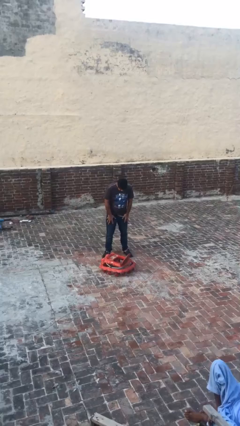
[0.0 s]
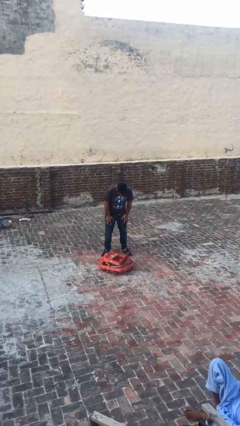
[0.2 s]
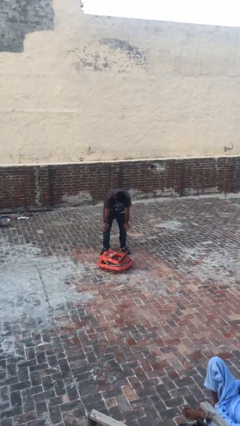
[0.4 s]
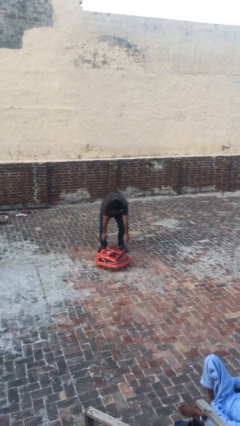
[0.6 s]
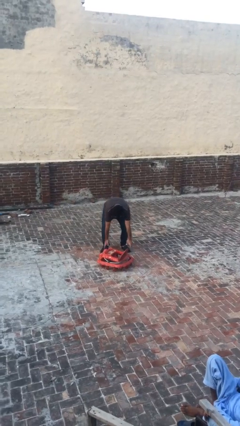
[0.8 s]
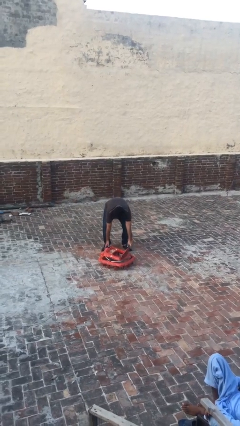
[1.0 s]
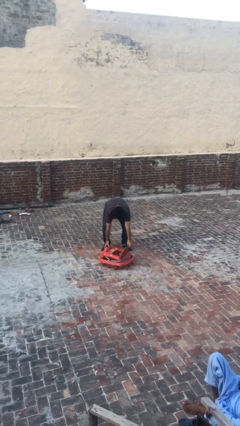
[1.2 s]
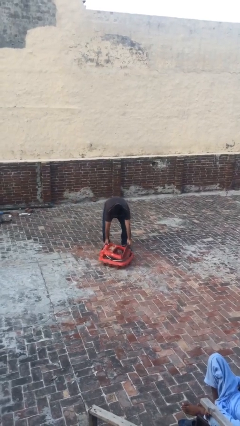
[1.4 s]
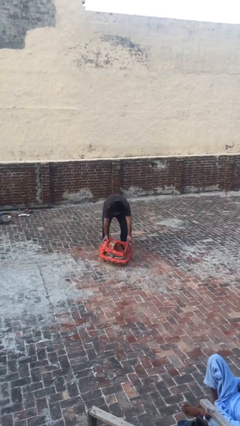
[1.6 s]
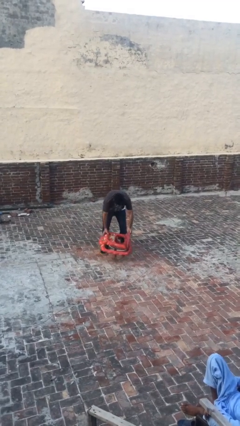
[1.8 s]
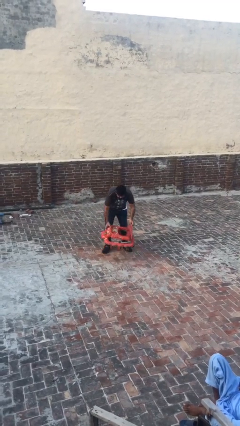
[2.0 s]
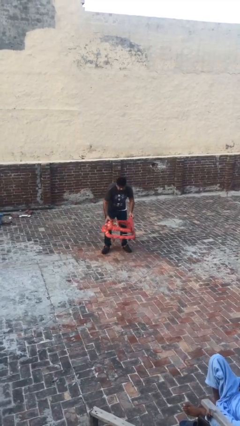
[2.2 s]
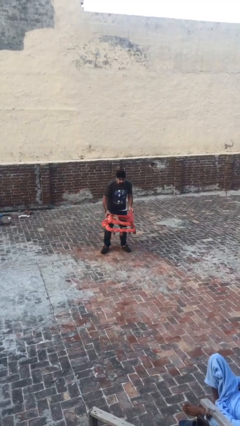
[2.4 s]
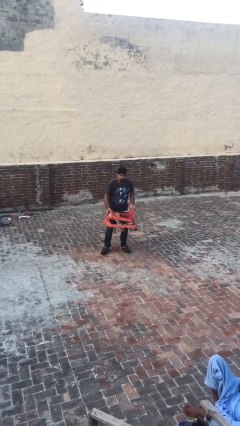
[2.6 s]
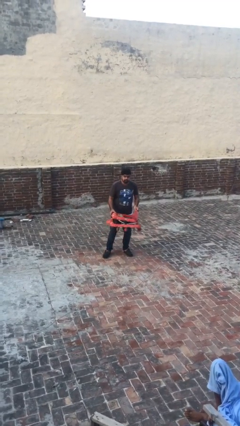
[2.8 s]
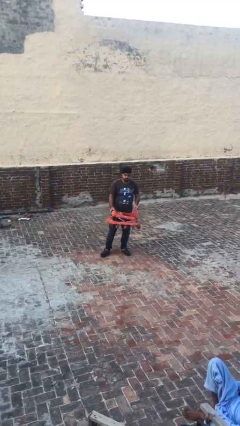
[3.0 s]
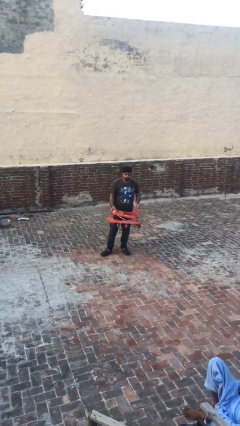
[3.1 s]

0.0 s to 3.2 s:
person picks up object from floor

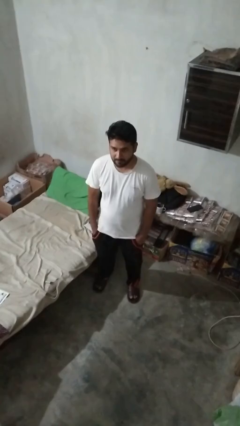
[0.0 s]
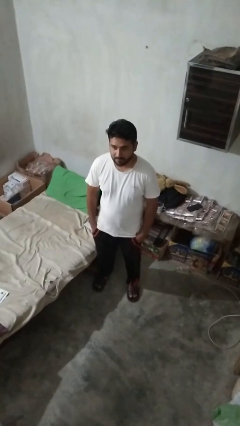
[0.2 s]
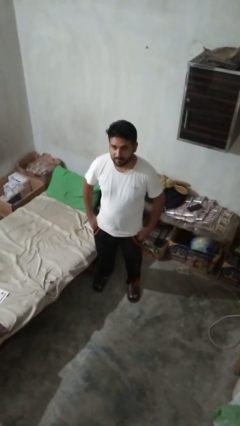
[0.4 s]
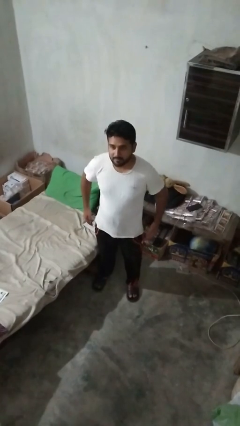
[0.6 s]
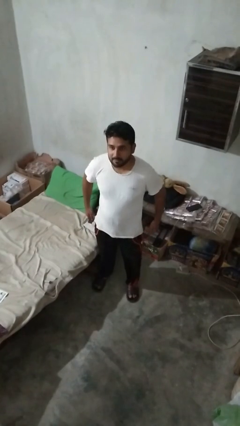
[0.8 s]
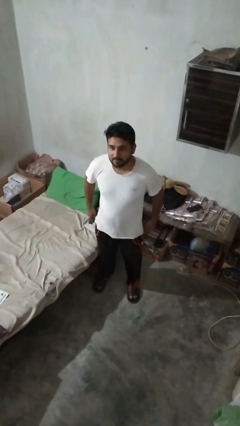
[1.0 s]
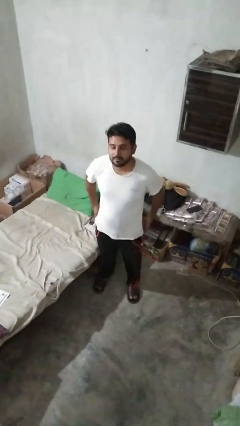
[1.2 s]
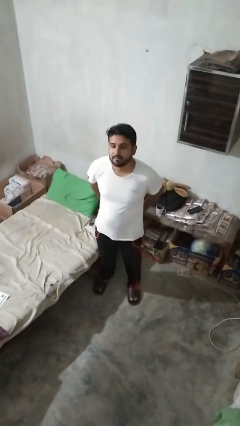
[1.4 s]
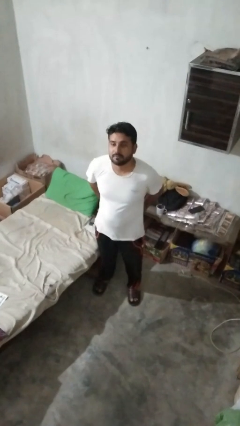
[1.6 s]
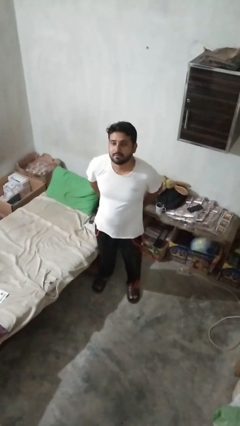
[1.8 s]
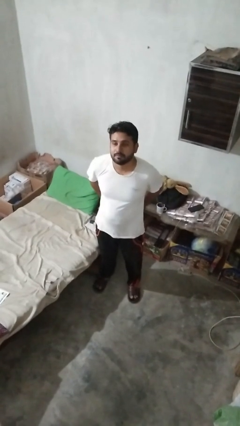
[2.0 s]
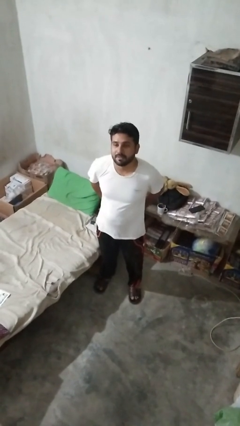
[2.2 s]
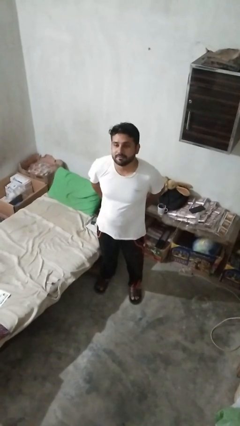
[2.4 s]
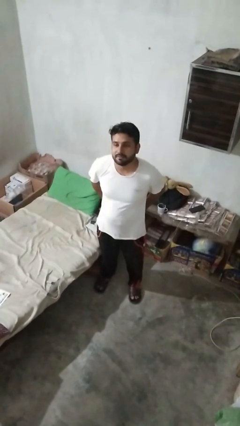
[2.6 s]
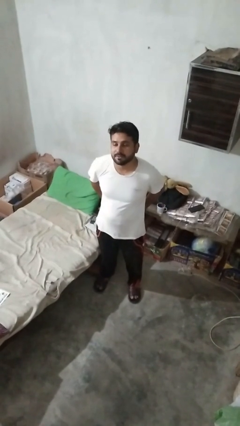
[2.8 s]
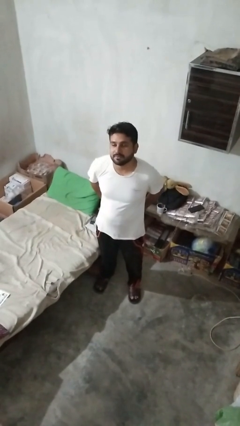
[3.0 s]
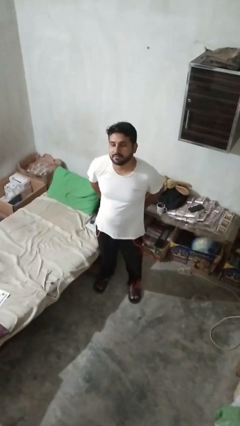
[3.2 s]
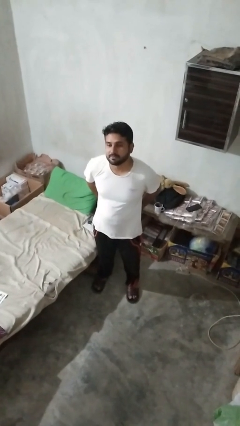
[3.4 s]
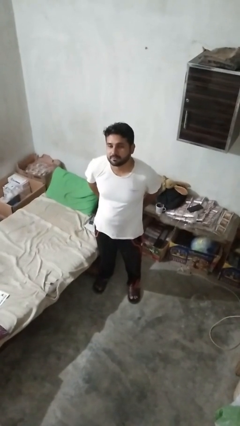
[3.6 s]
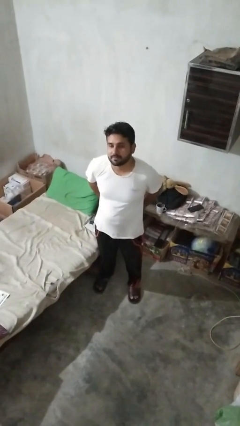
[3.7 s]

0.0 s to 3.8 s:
person puts hands in back pockets

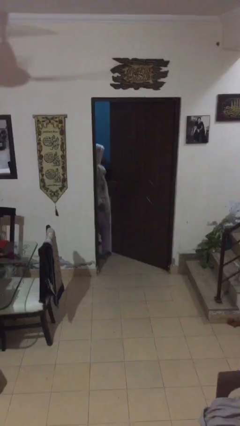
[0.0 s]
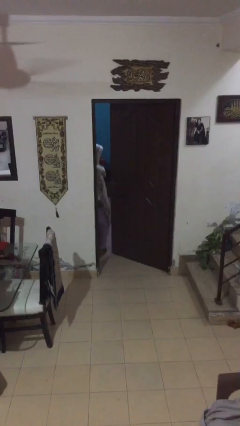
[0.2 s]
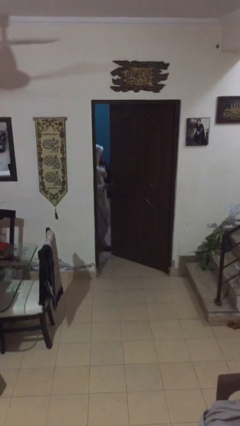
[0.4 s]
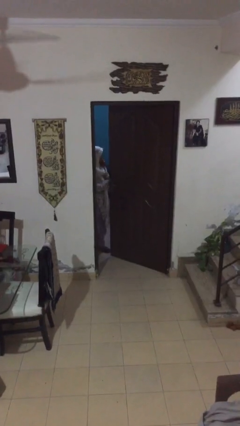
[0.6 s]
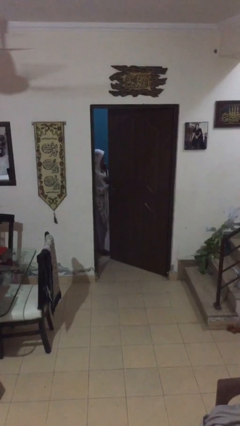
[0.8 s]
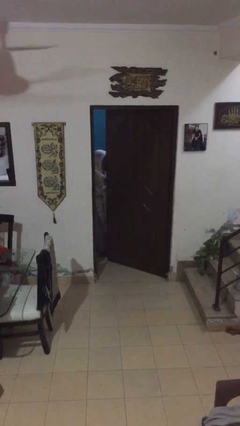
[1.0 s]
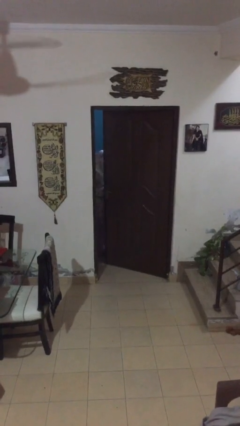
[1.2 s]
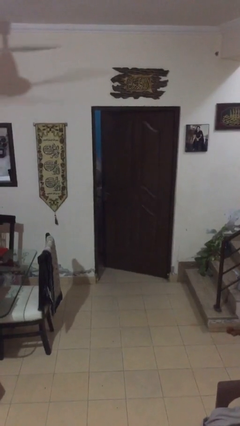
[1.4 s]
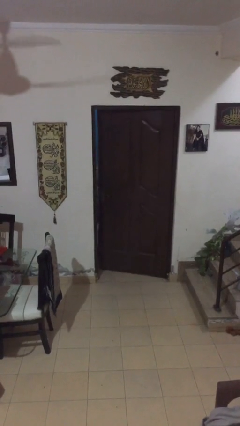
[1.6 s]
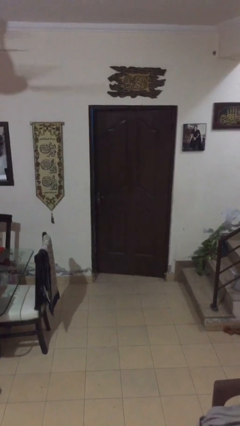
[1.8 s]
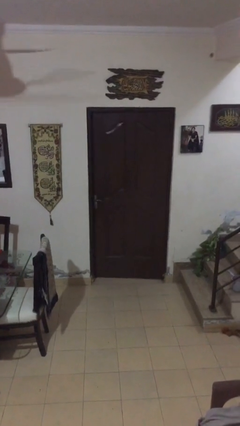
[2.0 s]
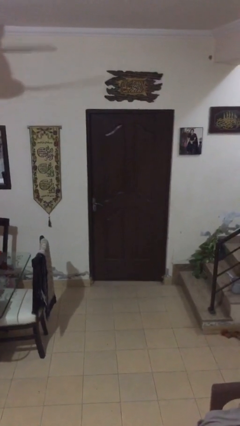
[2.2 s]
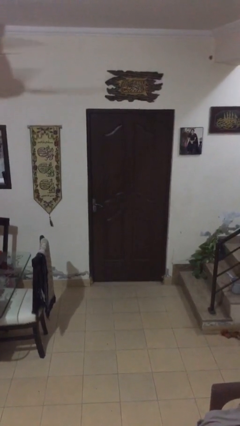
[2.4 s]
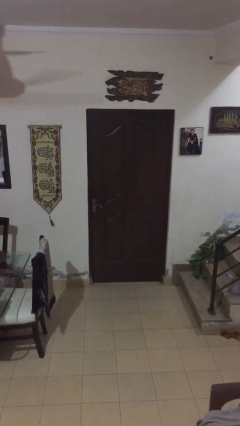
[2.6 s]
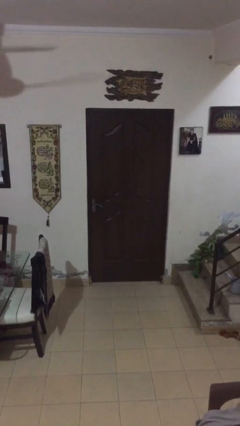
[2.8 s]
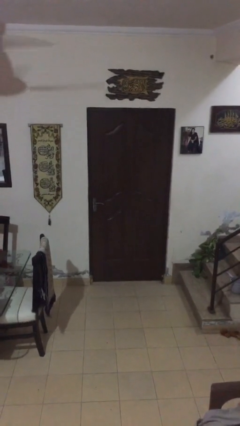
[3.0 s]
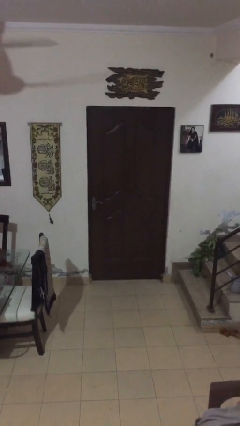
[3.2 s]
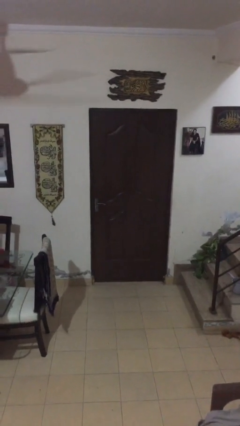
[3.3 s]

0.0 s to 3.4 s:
person closes facility door

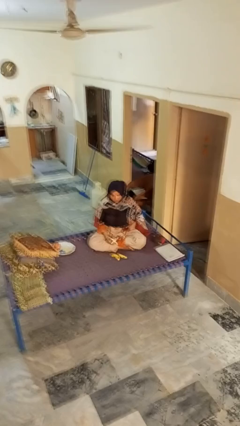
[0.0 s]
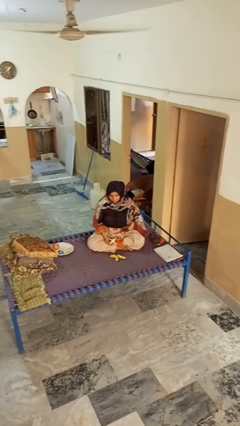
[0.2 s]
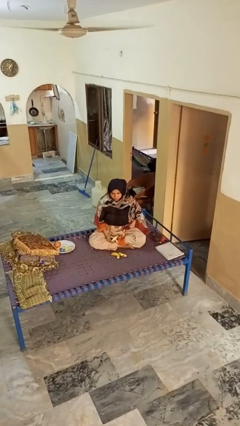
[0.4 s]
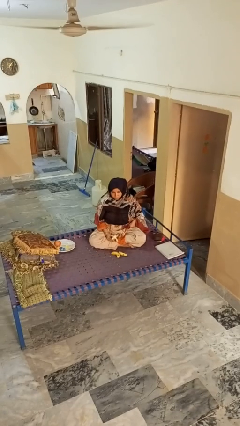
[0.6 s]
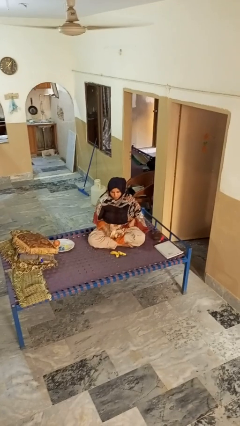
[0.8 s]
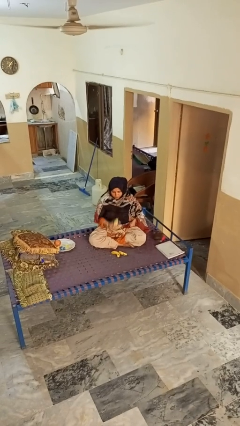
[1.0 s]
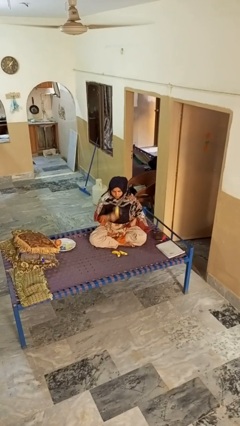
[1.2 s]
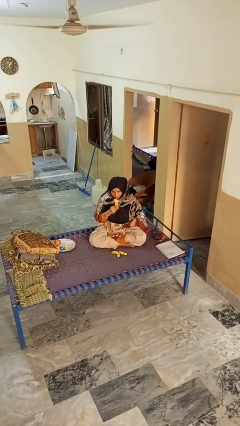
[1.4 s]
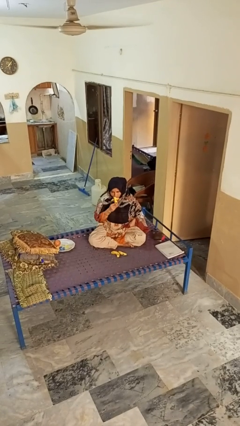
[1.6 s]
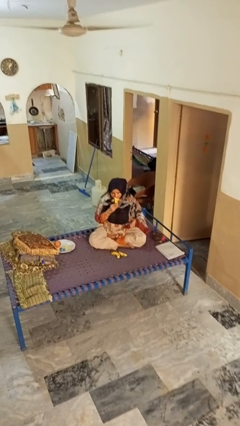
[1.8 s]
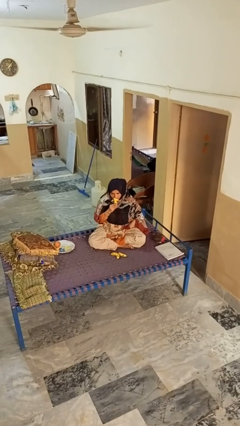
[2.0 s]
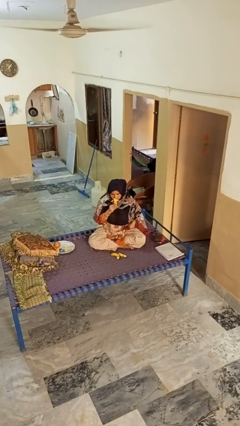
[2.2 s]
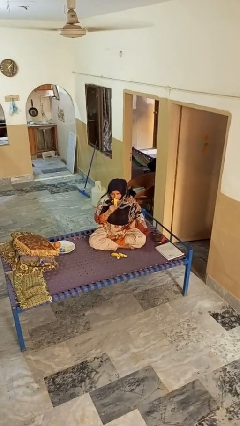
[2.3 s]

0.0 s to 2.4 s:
person eats banana

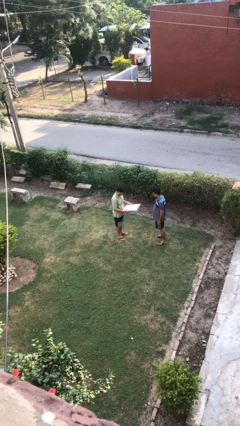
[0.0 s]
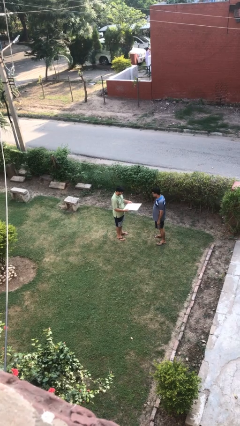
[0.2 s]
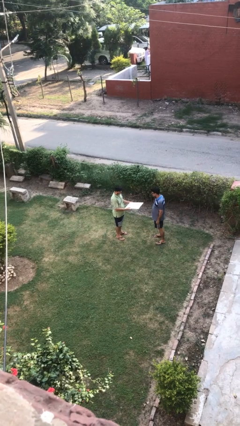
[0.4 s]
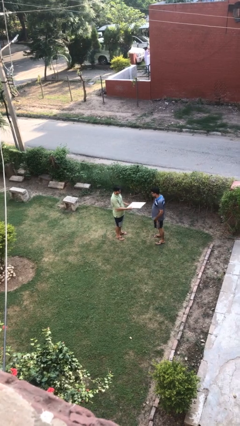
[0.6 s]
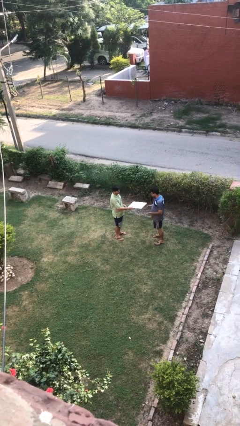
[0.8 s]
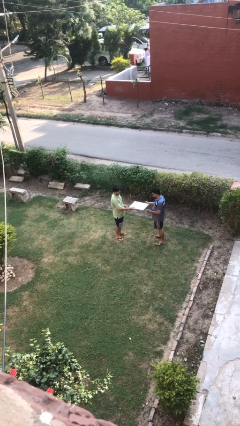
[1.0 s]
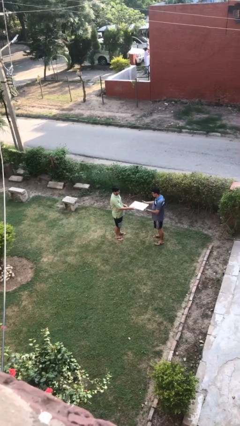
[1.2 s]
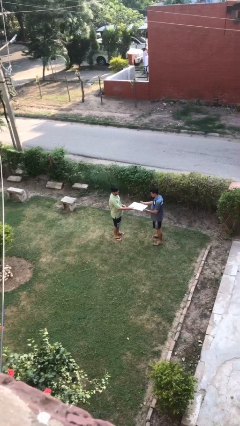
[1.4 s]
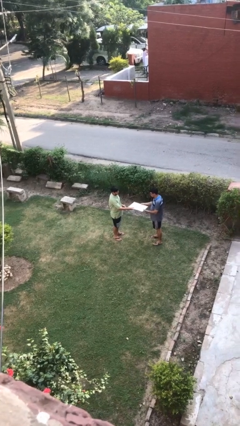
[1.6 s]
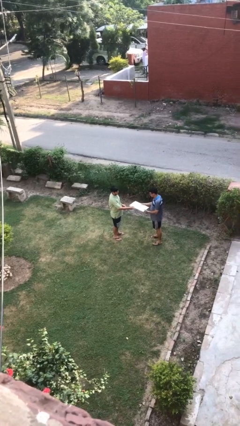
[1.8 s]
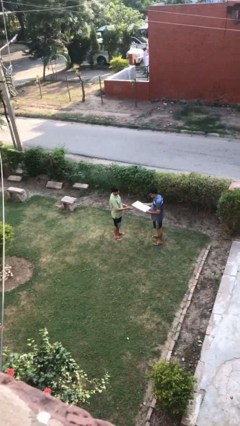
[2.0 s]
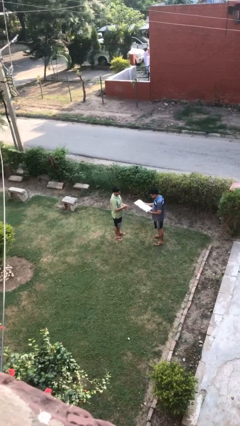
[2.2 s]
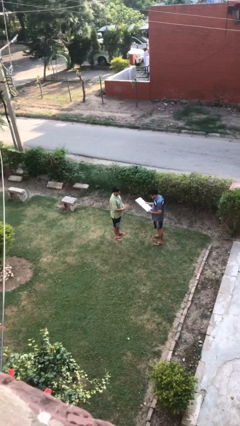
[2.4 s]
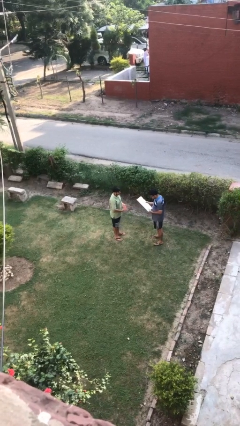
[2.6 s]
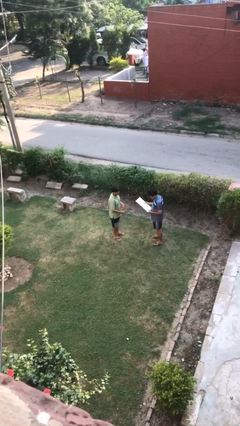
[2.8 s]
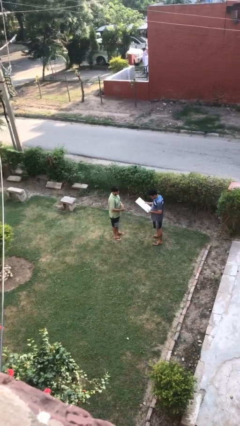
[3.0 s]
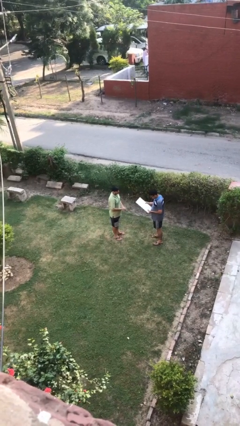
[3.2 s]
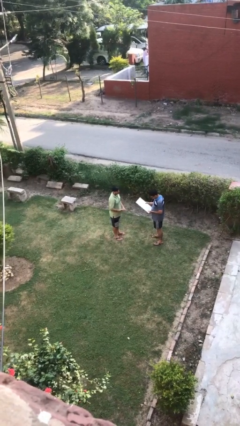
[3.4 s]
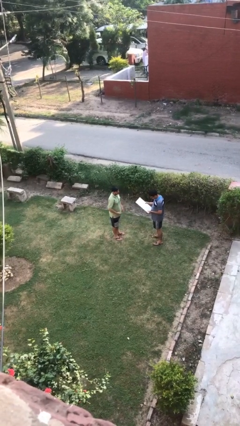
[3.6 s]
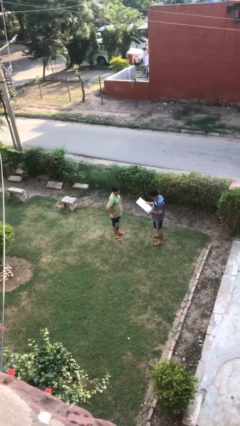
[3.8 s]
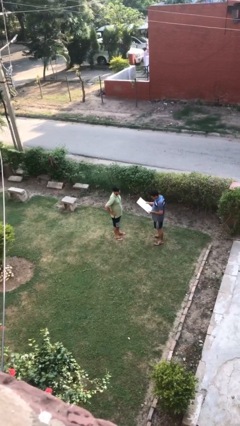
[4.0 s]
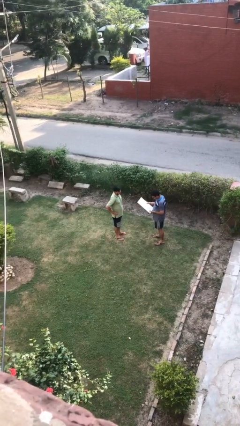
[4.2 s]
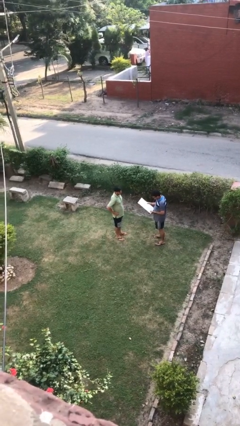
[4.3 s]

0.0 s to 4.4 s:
person transfers object to person

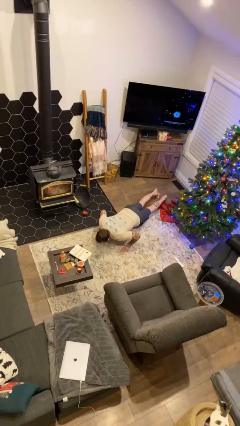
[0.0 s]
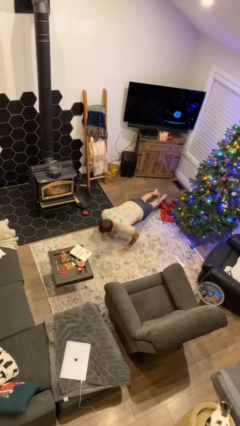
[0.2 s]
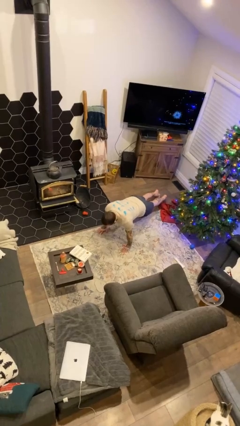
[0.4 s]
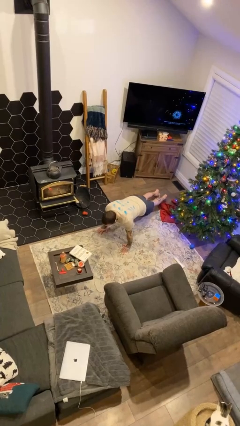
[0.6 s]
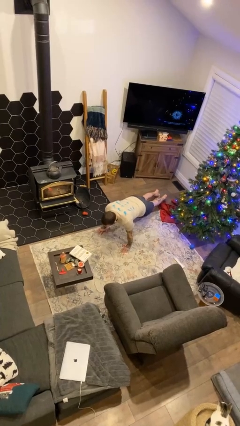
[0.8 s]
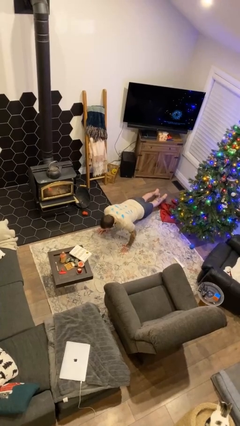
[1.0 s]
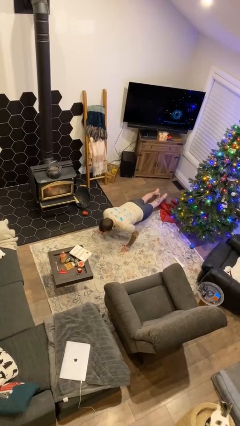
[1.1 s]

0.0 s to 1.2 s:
person exercises with pushup
